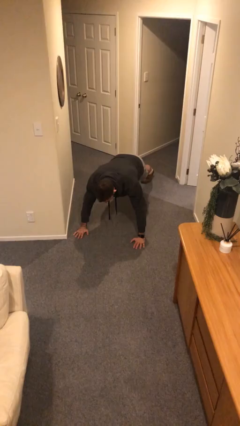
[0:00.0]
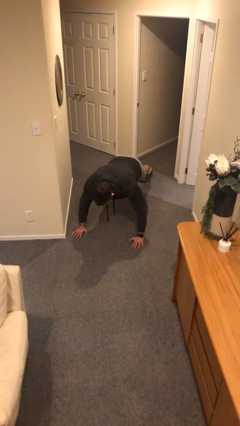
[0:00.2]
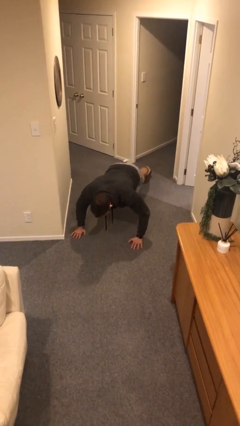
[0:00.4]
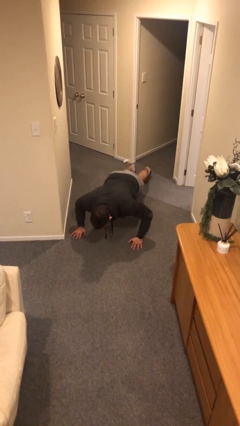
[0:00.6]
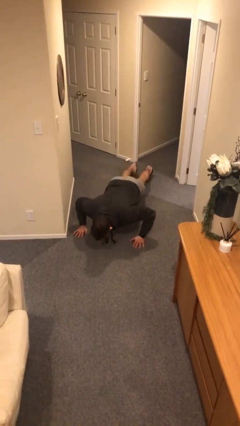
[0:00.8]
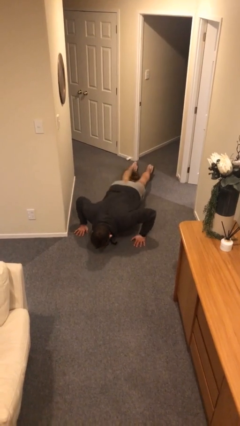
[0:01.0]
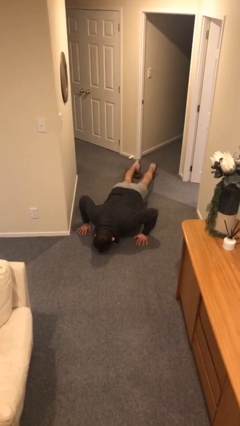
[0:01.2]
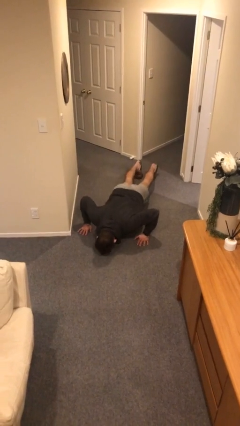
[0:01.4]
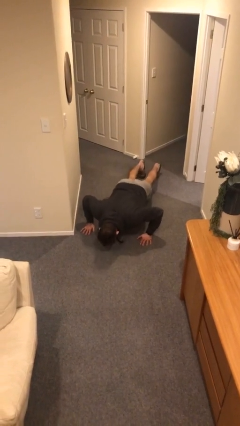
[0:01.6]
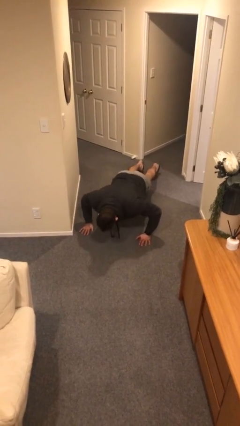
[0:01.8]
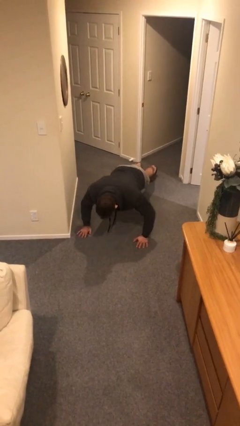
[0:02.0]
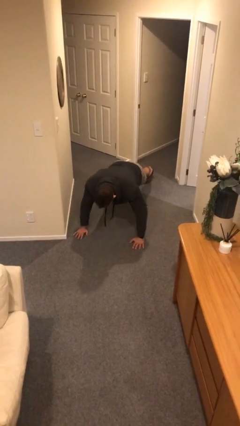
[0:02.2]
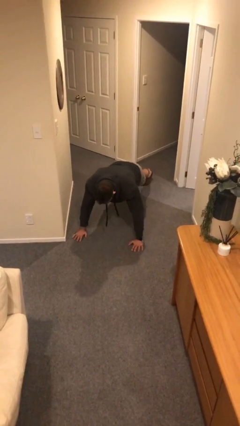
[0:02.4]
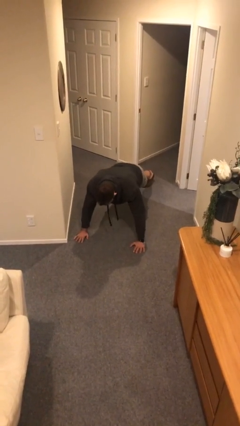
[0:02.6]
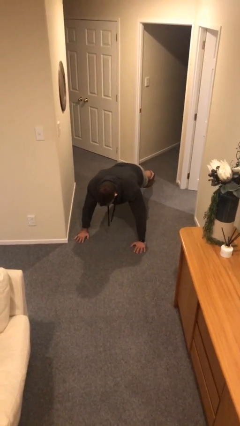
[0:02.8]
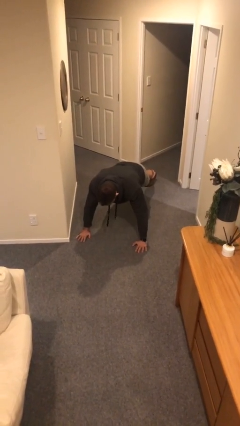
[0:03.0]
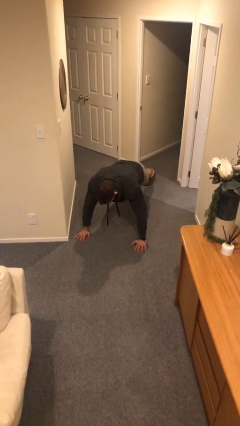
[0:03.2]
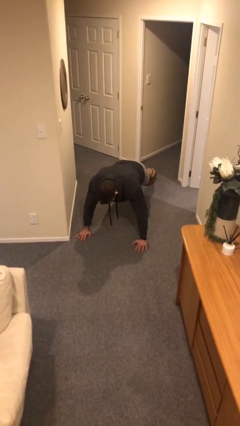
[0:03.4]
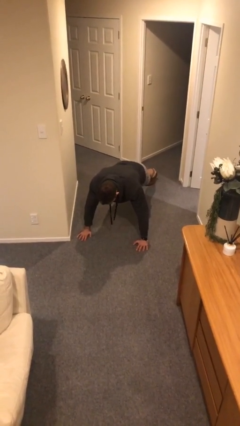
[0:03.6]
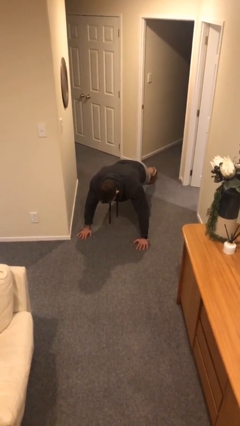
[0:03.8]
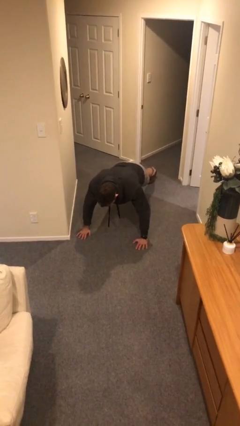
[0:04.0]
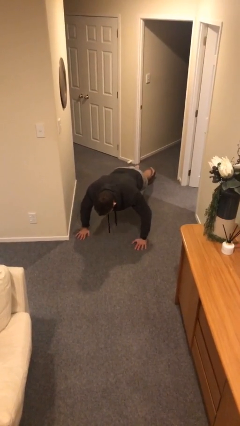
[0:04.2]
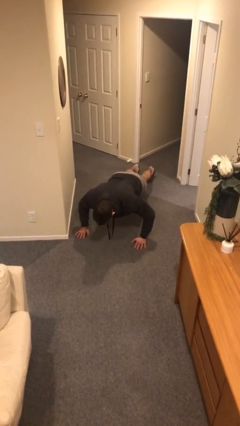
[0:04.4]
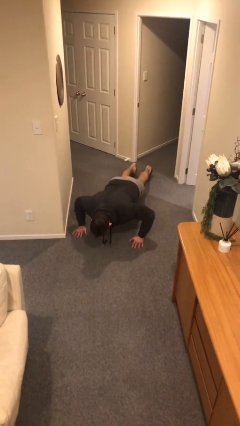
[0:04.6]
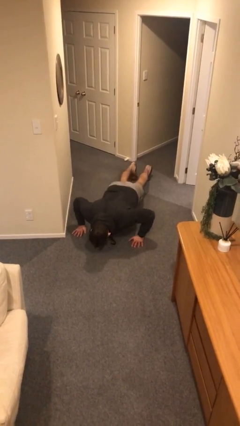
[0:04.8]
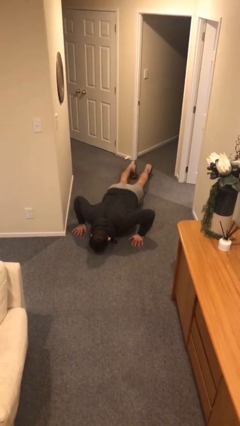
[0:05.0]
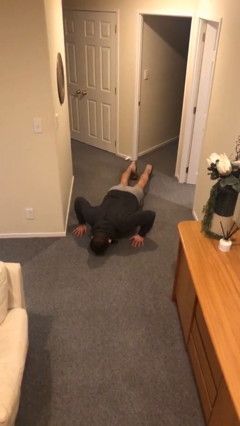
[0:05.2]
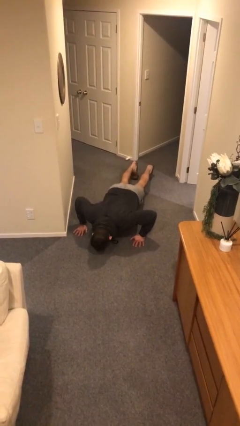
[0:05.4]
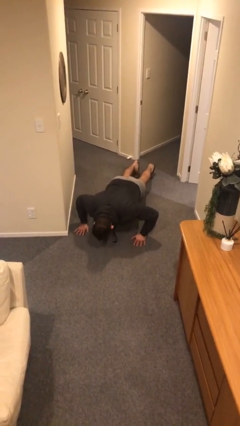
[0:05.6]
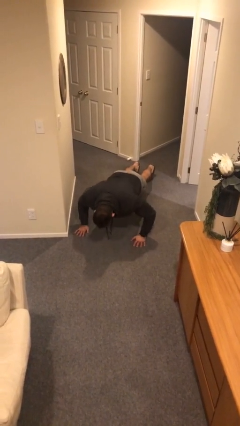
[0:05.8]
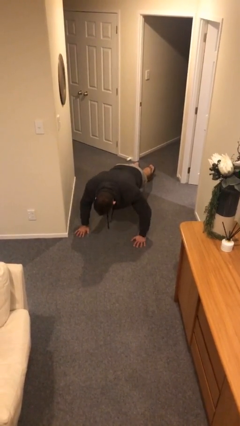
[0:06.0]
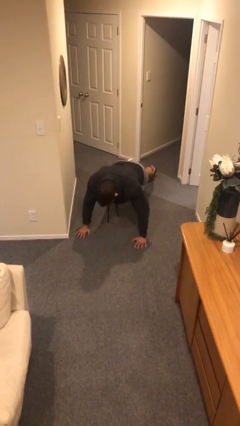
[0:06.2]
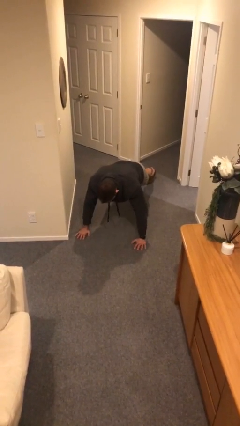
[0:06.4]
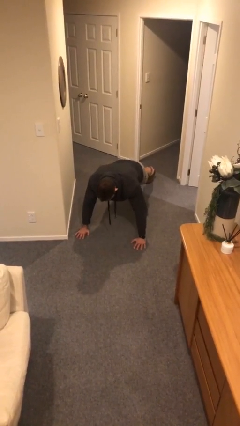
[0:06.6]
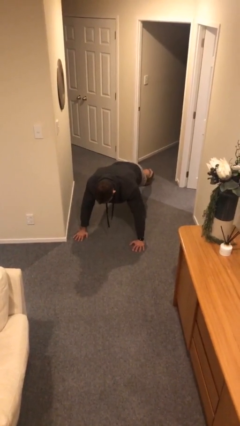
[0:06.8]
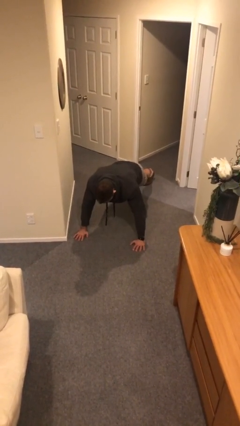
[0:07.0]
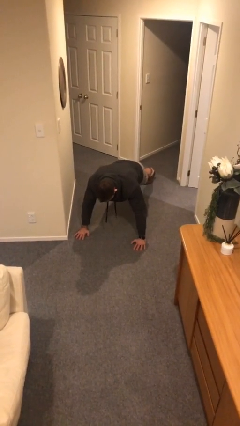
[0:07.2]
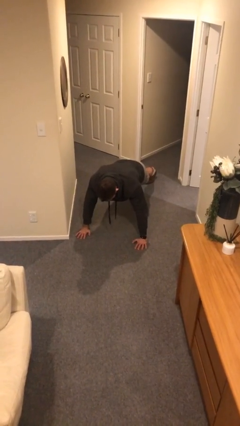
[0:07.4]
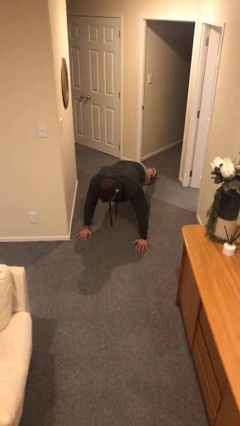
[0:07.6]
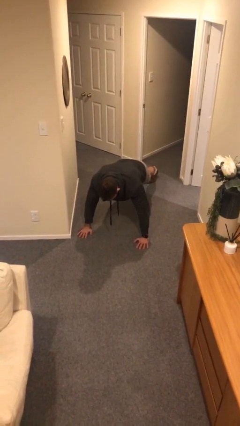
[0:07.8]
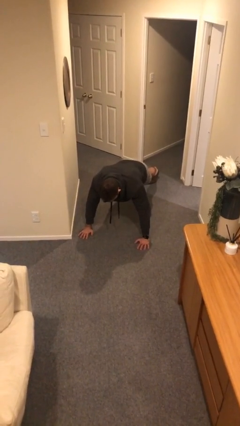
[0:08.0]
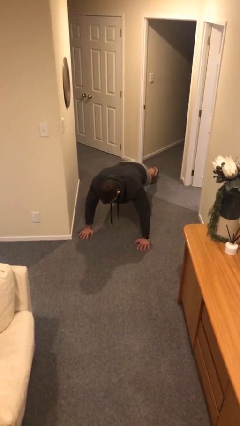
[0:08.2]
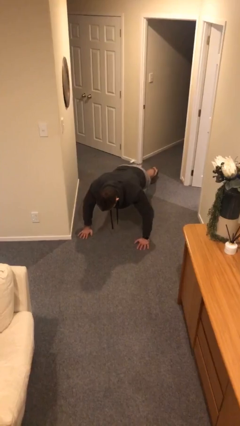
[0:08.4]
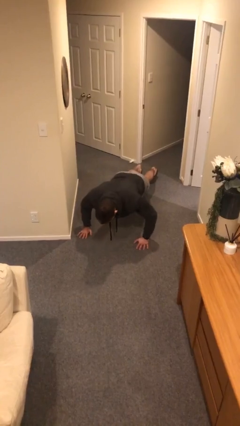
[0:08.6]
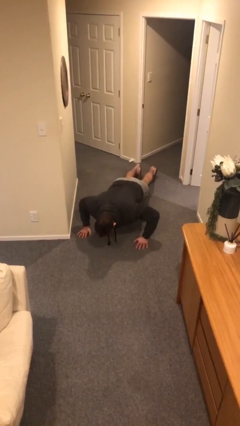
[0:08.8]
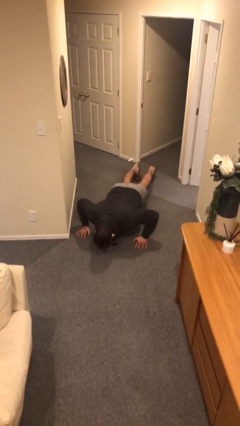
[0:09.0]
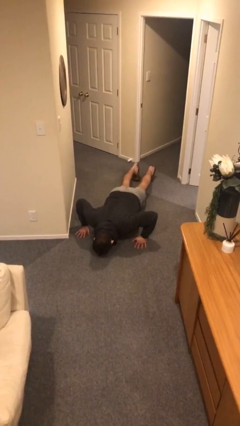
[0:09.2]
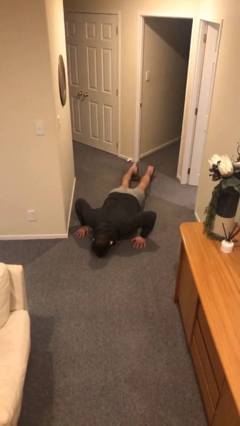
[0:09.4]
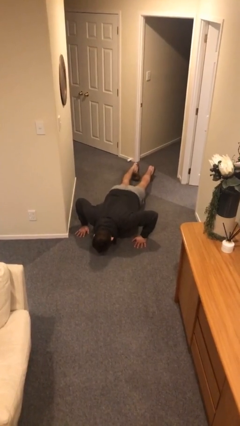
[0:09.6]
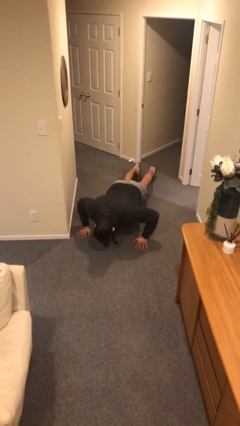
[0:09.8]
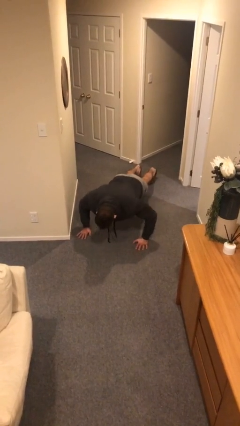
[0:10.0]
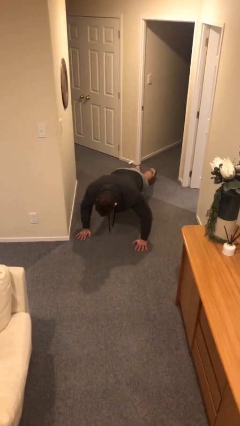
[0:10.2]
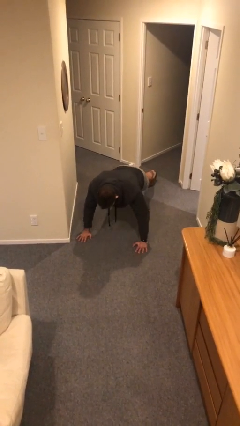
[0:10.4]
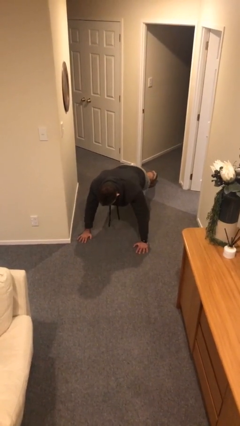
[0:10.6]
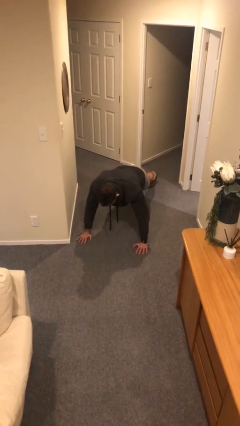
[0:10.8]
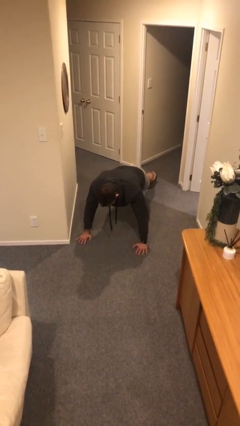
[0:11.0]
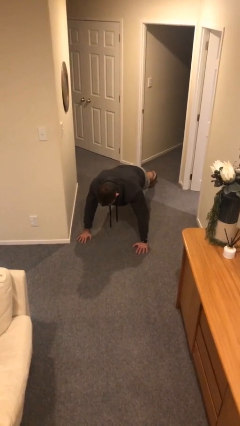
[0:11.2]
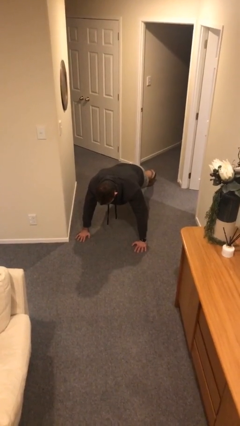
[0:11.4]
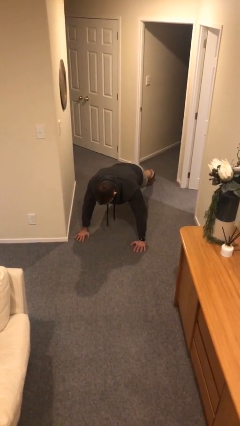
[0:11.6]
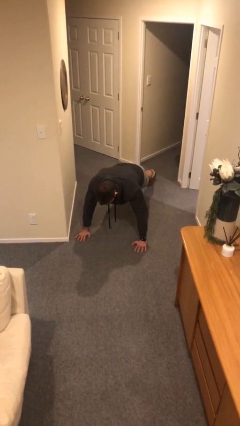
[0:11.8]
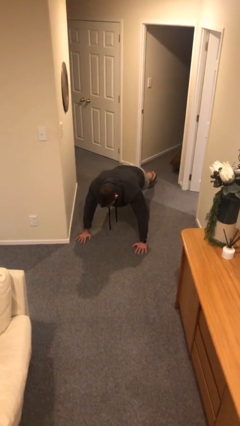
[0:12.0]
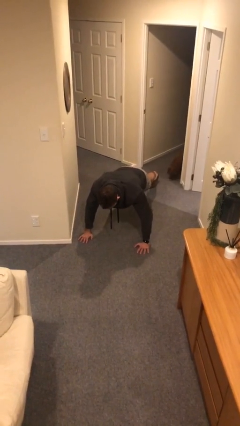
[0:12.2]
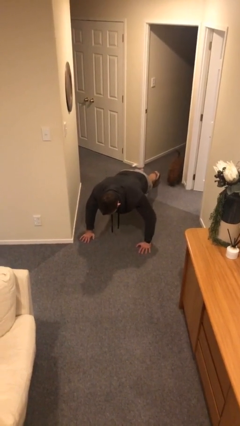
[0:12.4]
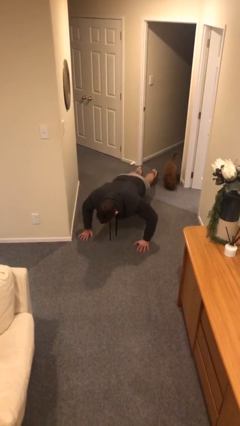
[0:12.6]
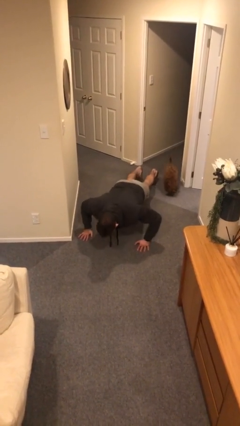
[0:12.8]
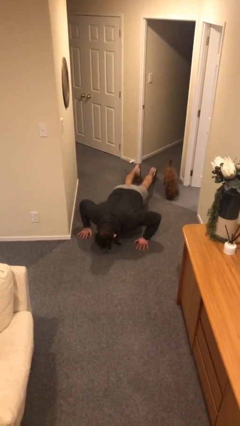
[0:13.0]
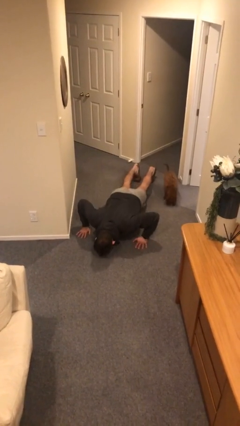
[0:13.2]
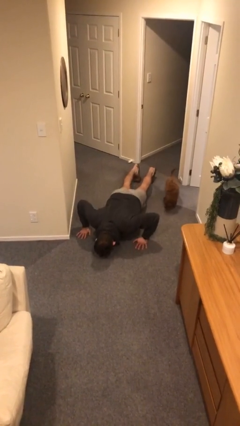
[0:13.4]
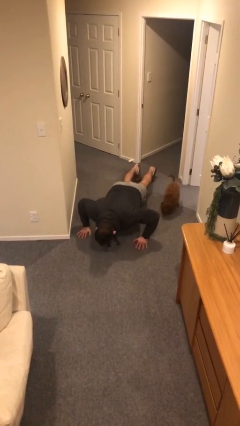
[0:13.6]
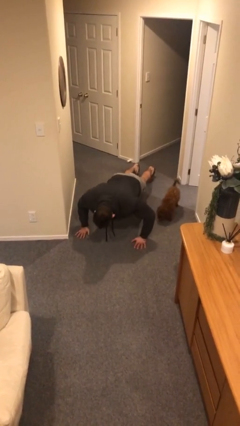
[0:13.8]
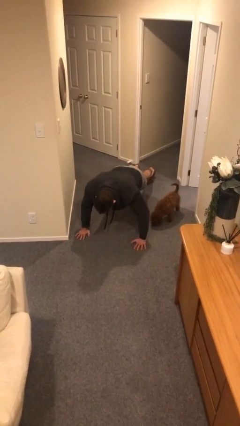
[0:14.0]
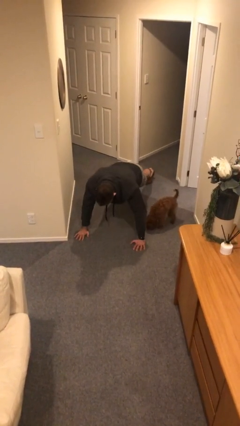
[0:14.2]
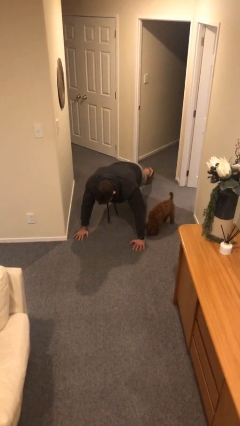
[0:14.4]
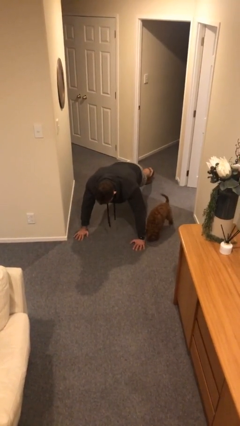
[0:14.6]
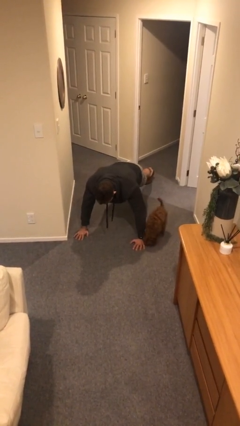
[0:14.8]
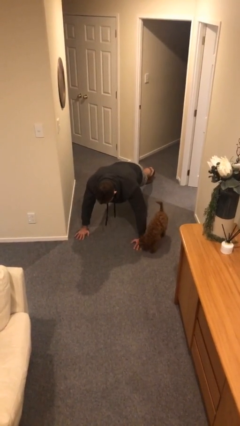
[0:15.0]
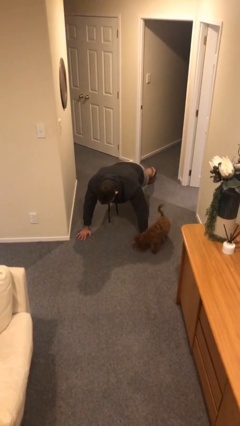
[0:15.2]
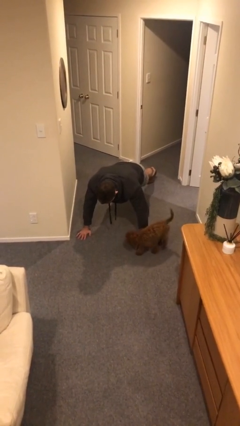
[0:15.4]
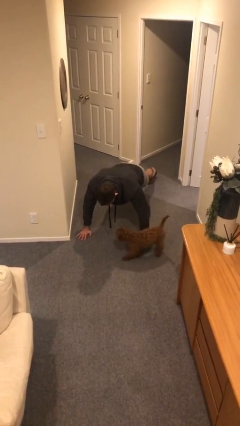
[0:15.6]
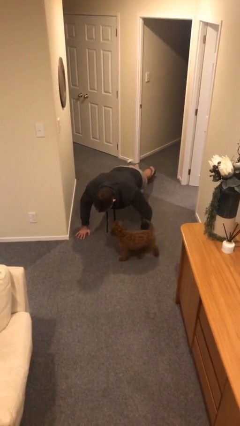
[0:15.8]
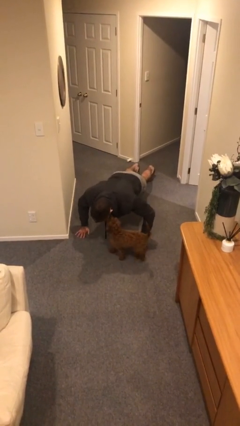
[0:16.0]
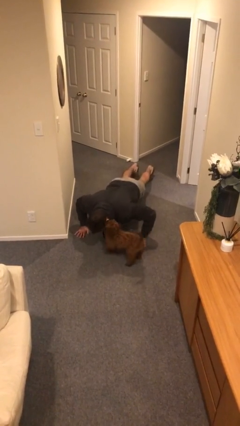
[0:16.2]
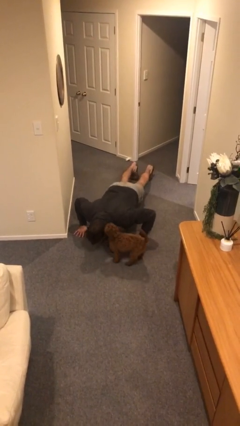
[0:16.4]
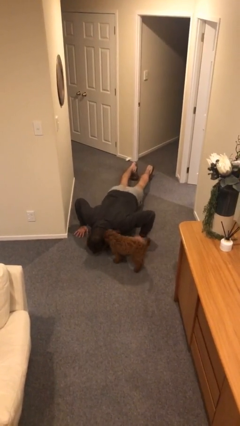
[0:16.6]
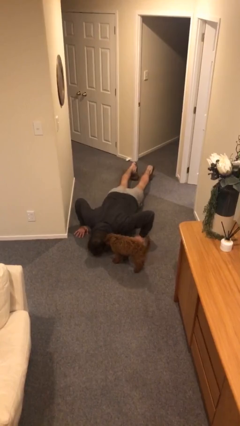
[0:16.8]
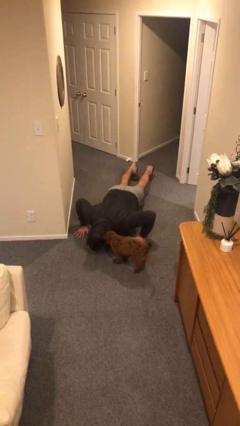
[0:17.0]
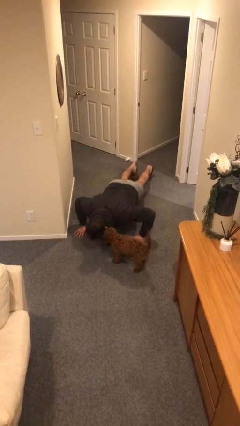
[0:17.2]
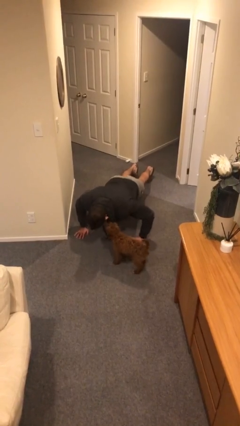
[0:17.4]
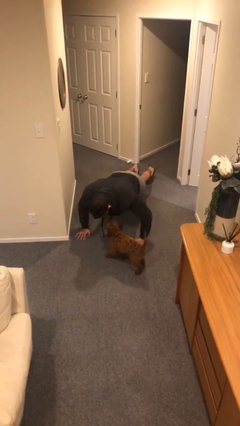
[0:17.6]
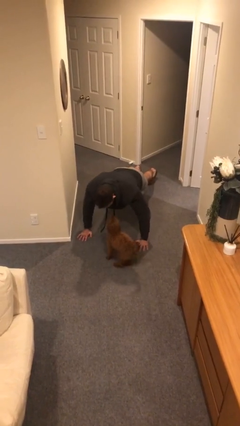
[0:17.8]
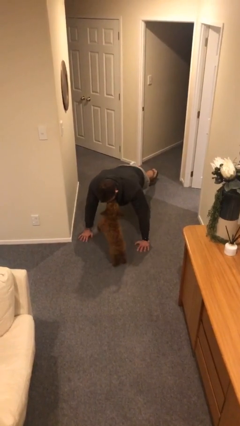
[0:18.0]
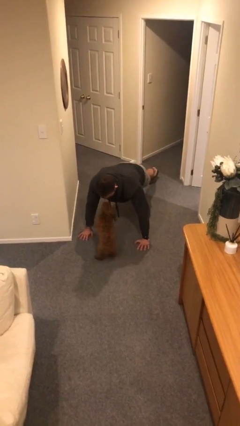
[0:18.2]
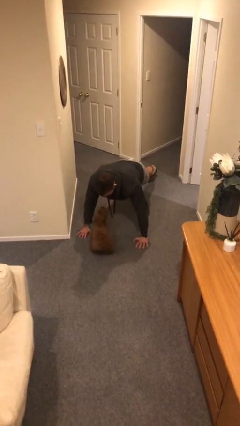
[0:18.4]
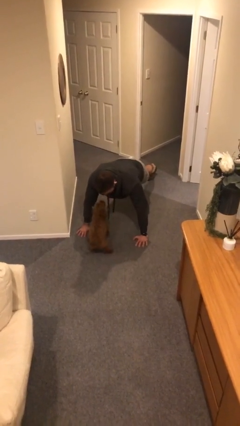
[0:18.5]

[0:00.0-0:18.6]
person exercises with pushup
